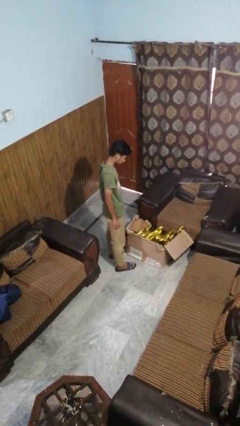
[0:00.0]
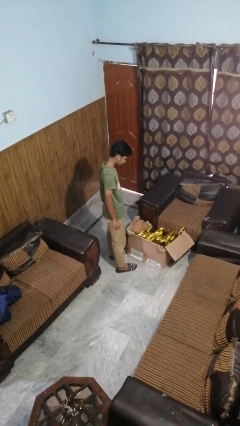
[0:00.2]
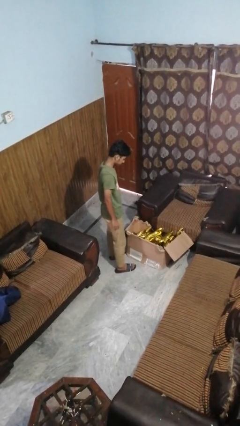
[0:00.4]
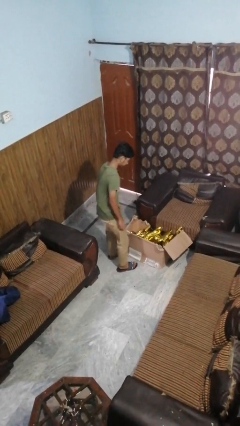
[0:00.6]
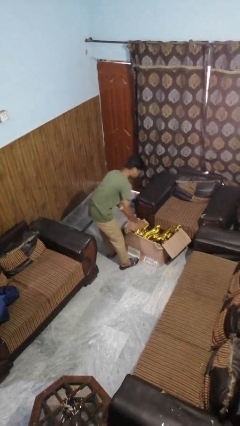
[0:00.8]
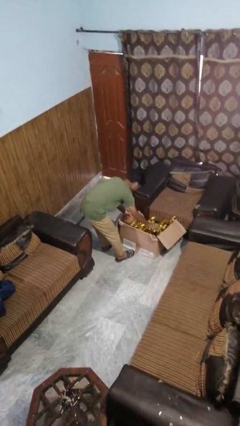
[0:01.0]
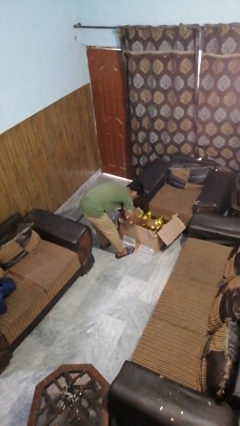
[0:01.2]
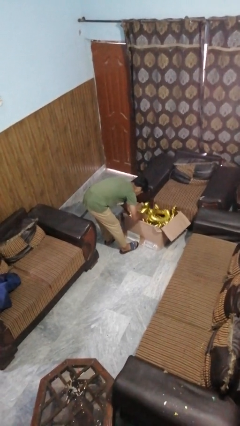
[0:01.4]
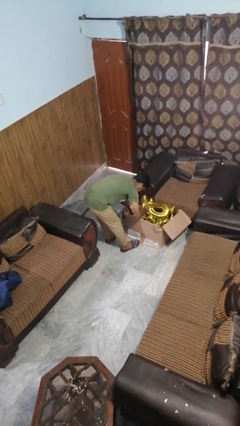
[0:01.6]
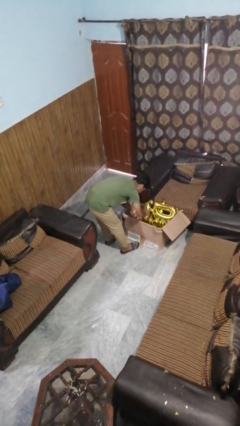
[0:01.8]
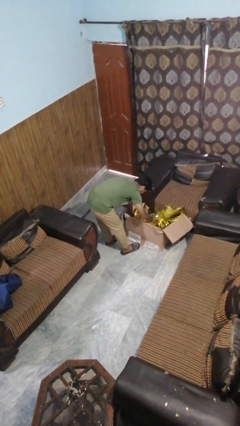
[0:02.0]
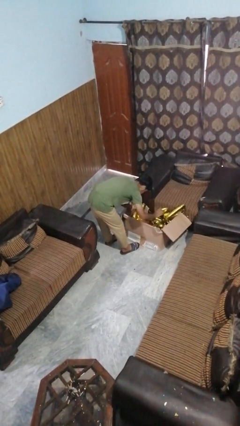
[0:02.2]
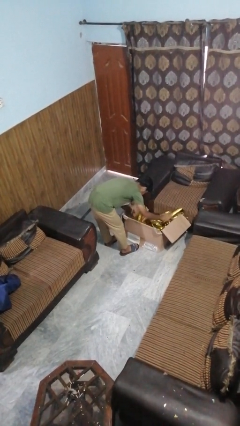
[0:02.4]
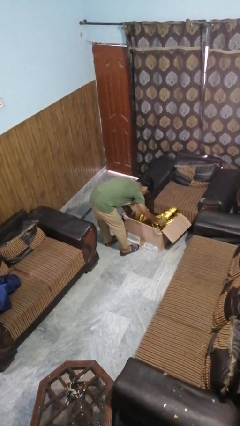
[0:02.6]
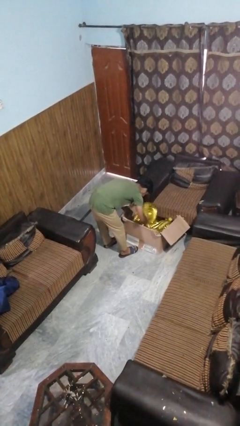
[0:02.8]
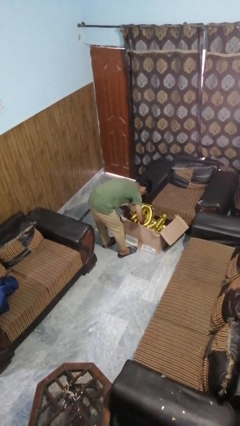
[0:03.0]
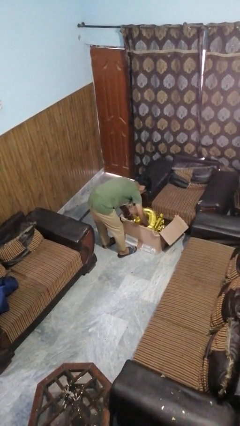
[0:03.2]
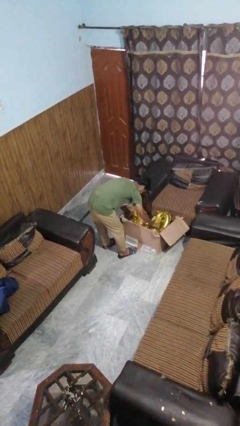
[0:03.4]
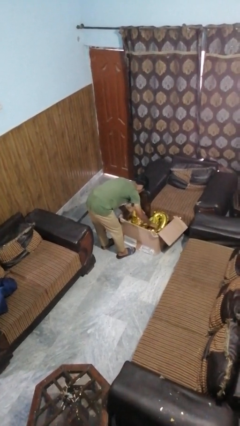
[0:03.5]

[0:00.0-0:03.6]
person searches in box

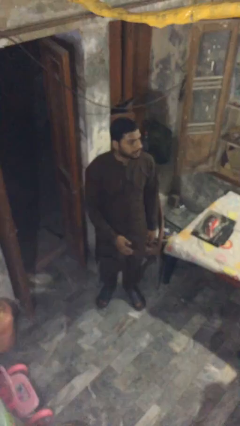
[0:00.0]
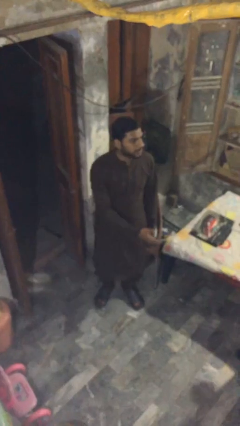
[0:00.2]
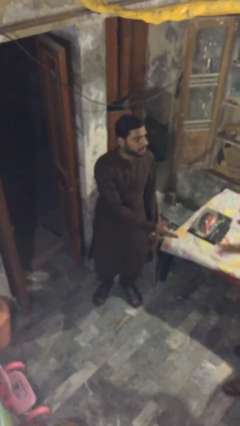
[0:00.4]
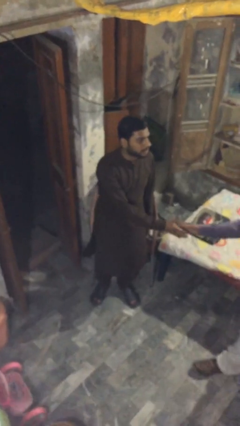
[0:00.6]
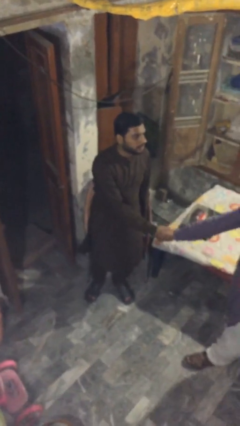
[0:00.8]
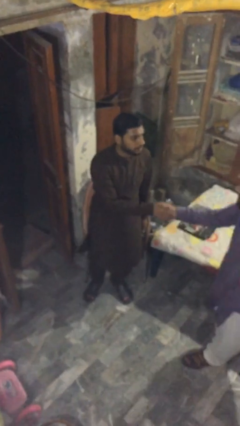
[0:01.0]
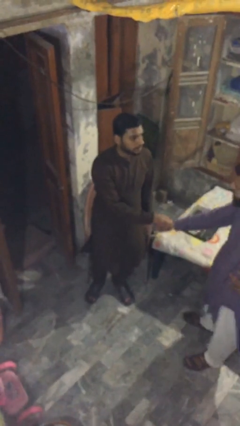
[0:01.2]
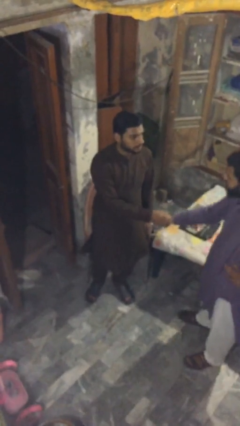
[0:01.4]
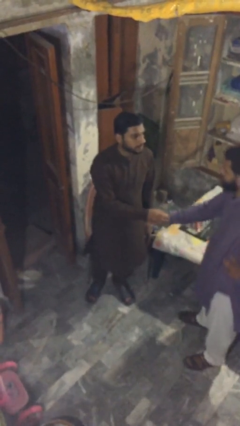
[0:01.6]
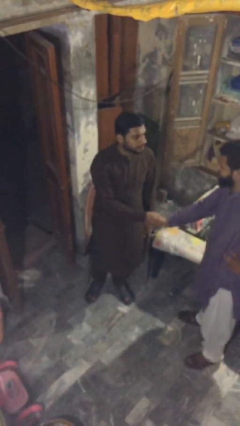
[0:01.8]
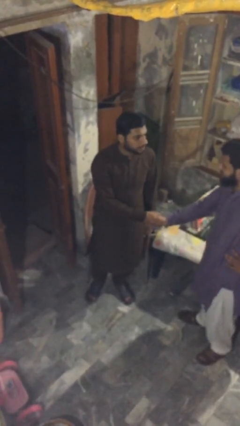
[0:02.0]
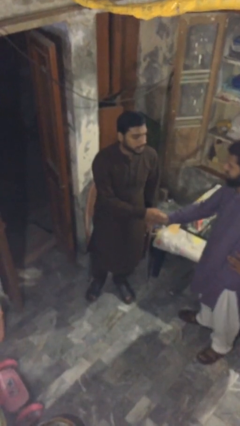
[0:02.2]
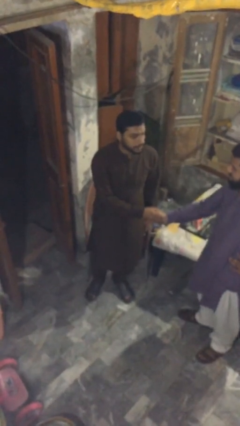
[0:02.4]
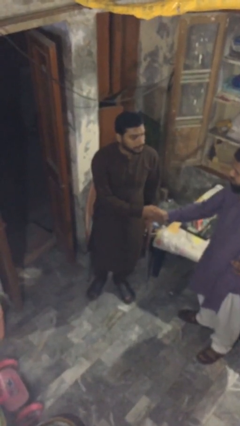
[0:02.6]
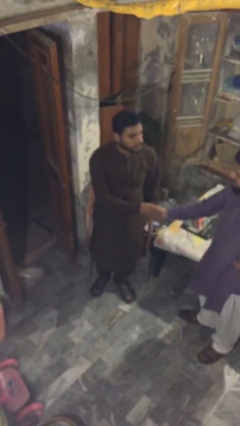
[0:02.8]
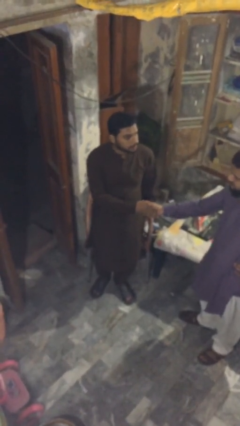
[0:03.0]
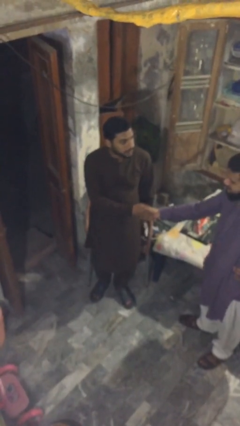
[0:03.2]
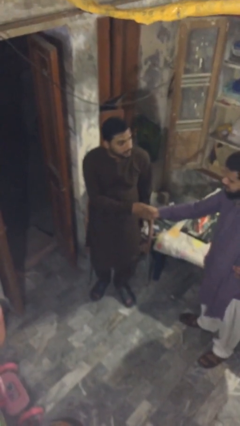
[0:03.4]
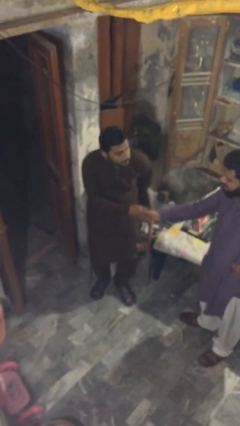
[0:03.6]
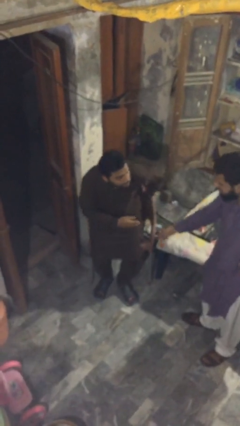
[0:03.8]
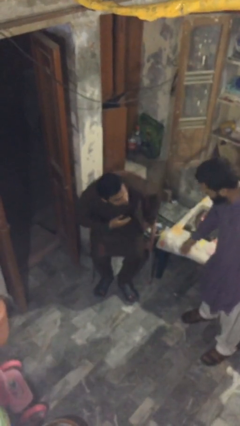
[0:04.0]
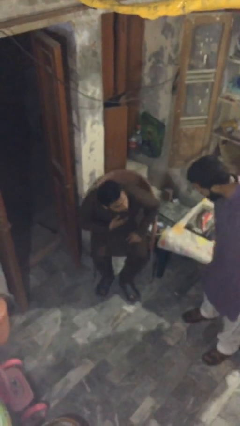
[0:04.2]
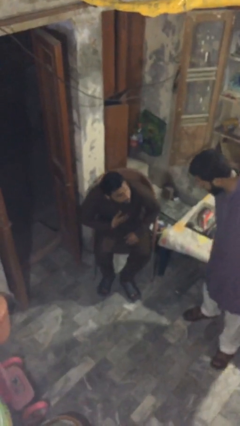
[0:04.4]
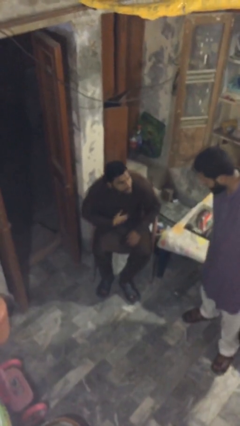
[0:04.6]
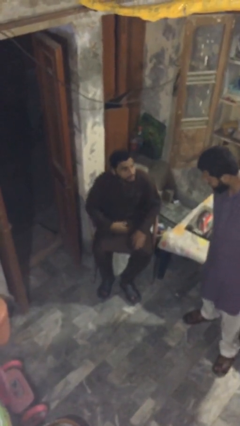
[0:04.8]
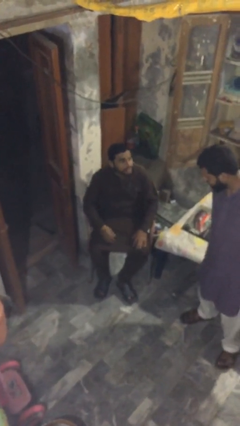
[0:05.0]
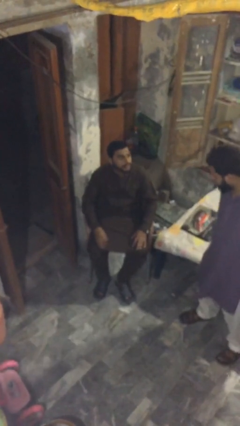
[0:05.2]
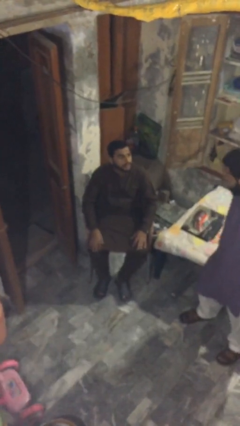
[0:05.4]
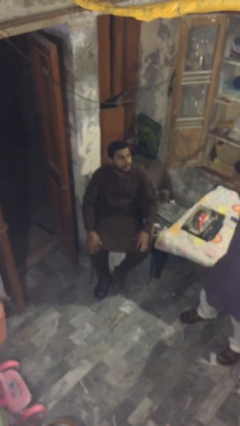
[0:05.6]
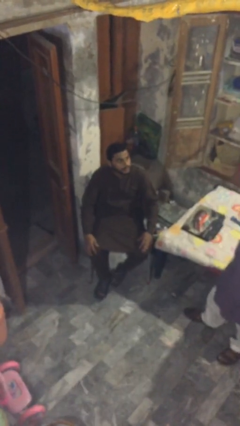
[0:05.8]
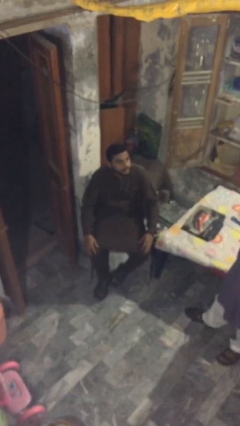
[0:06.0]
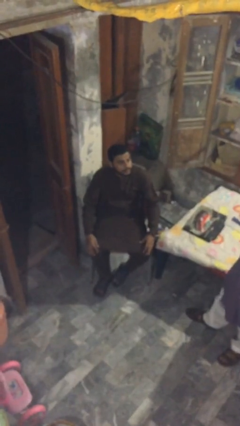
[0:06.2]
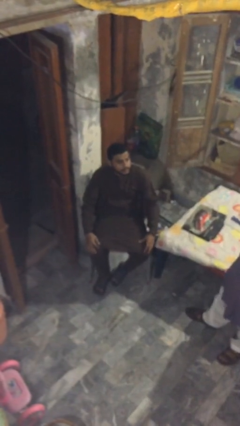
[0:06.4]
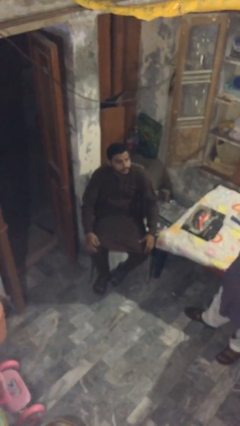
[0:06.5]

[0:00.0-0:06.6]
person shakes hand

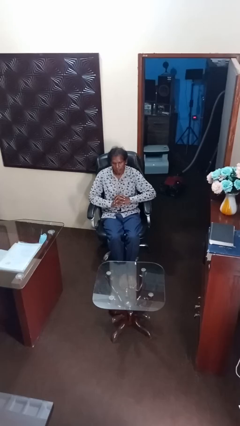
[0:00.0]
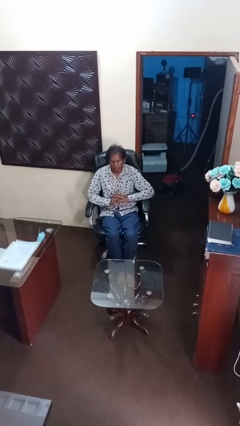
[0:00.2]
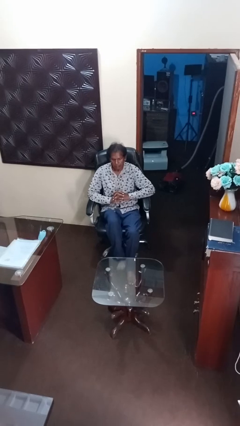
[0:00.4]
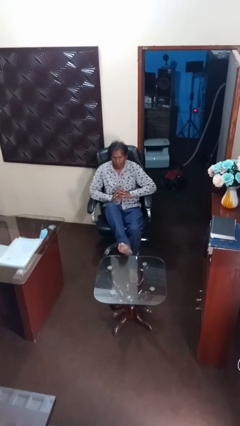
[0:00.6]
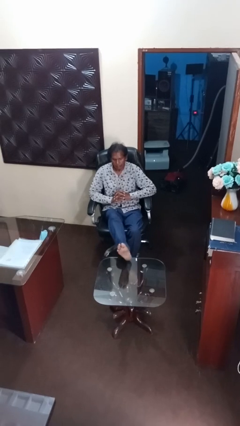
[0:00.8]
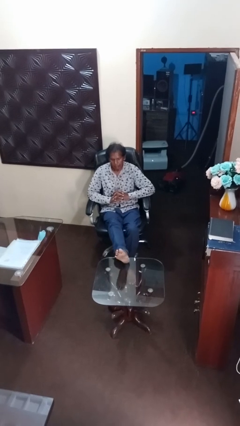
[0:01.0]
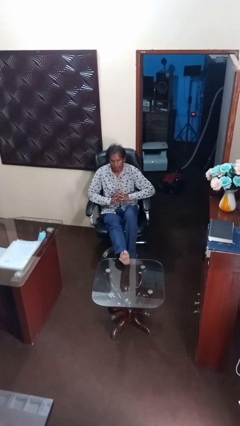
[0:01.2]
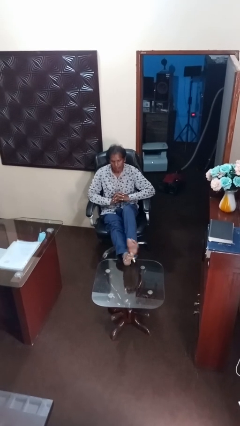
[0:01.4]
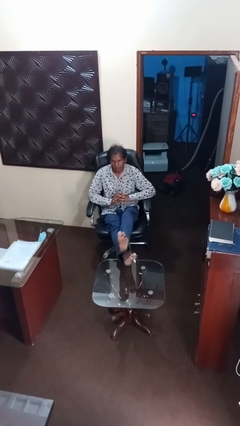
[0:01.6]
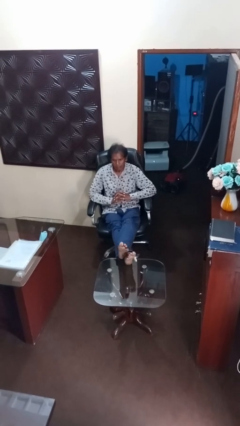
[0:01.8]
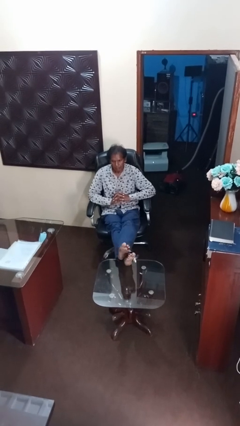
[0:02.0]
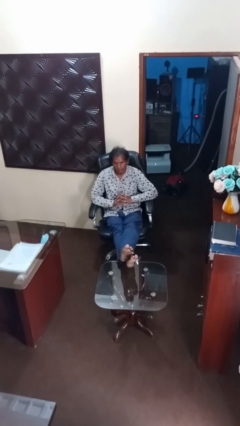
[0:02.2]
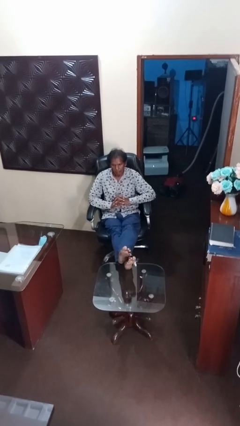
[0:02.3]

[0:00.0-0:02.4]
person puts feet up

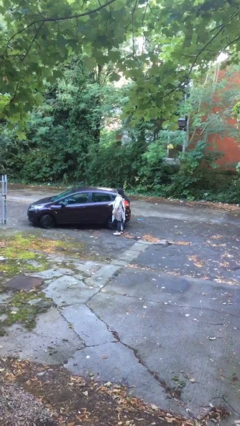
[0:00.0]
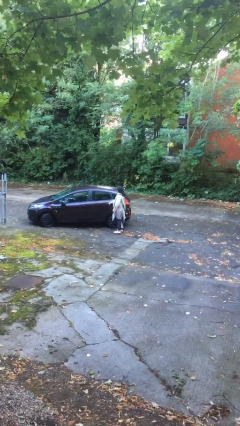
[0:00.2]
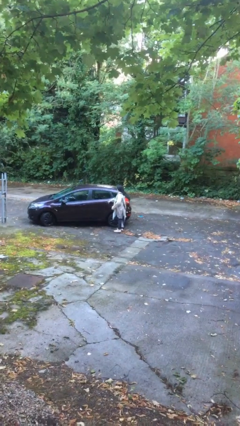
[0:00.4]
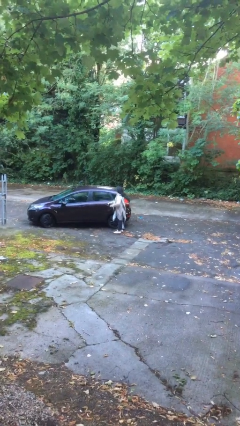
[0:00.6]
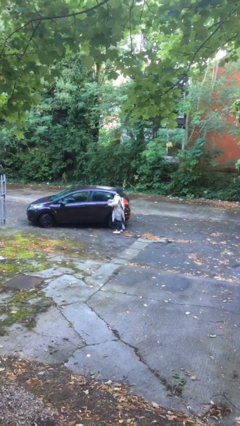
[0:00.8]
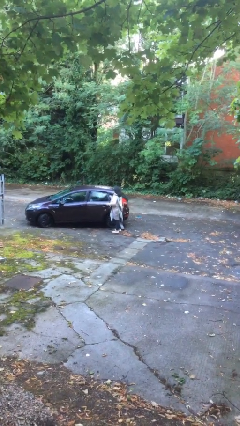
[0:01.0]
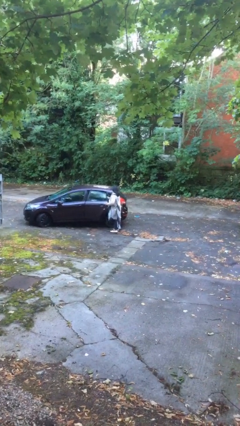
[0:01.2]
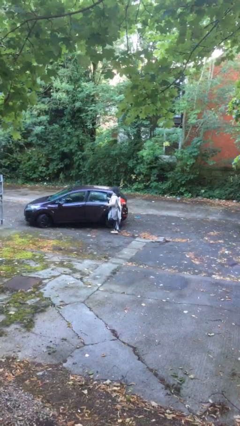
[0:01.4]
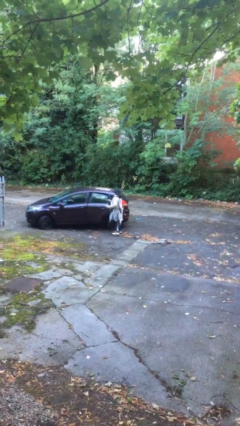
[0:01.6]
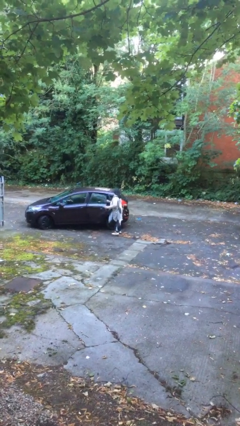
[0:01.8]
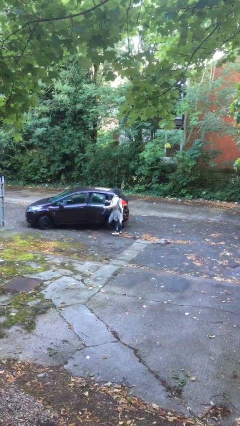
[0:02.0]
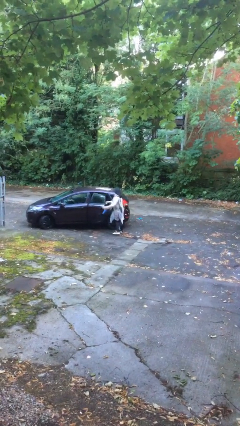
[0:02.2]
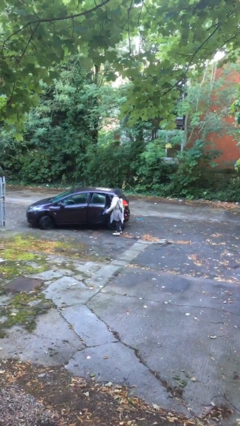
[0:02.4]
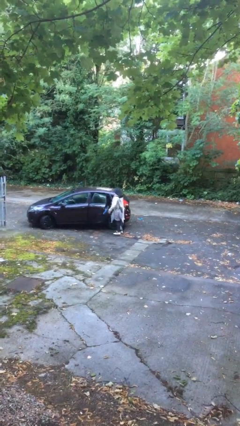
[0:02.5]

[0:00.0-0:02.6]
person opens car door

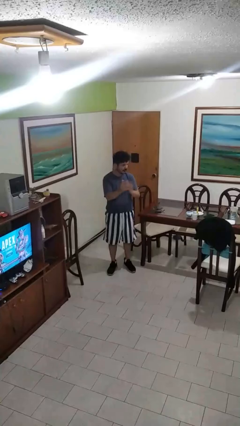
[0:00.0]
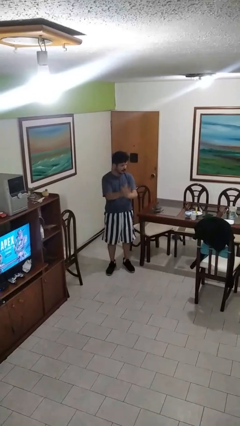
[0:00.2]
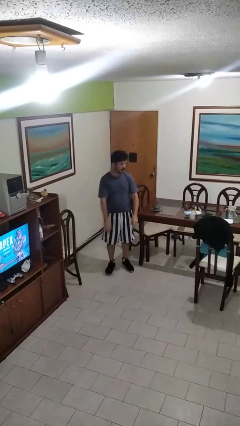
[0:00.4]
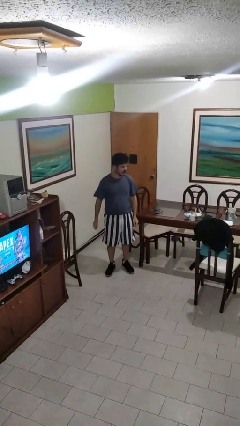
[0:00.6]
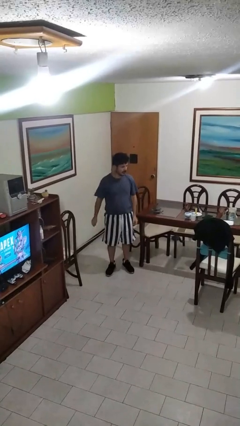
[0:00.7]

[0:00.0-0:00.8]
person claps hands

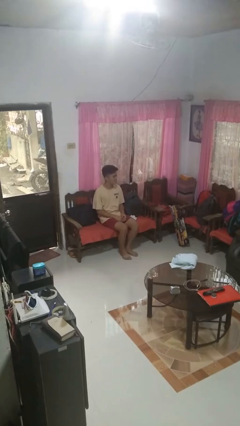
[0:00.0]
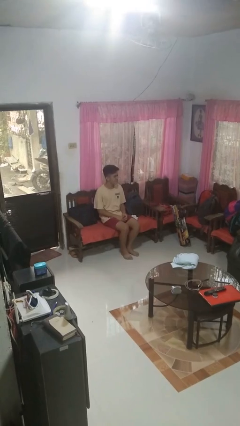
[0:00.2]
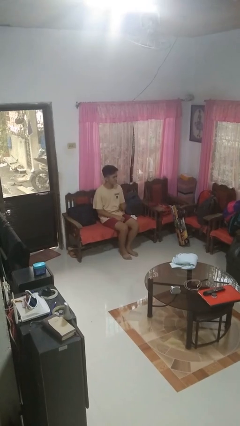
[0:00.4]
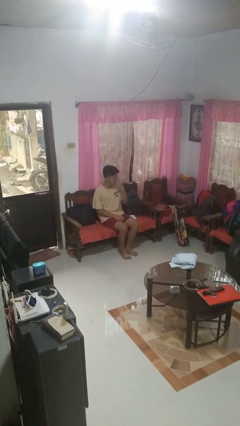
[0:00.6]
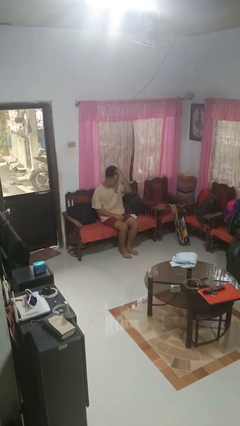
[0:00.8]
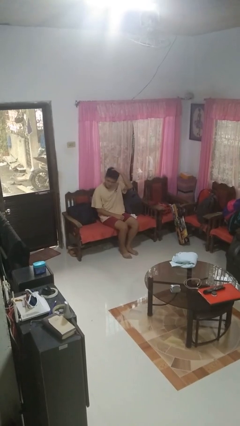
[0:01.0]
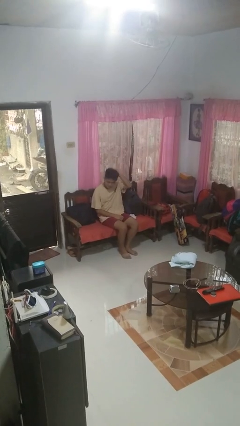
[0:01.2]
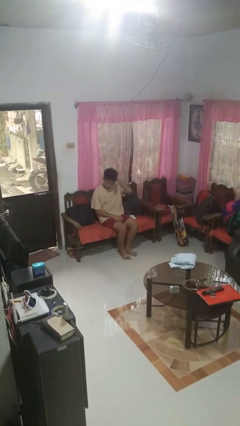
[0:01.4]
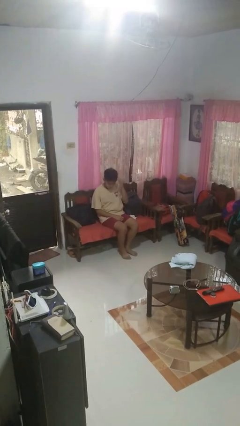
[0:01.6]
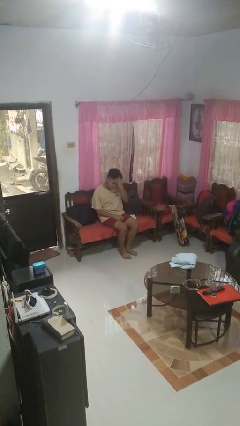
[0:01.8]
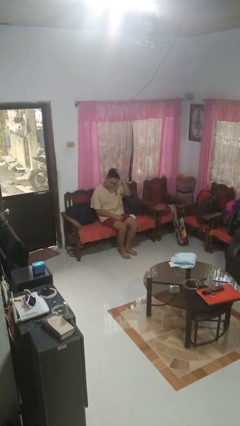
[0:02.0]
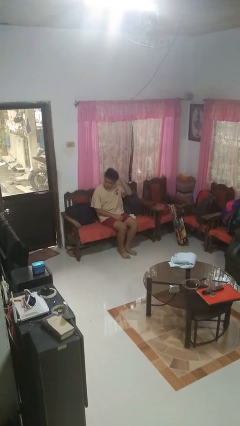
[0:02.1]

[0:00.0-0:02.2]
person strokes hair
